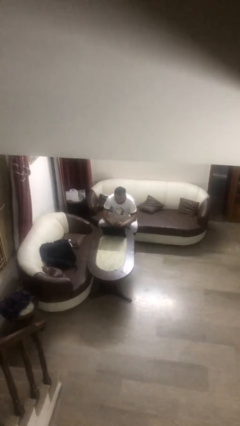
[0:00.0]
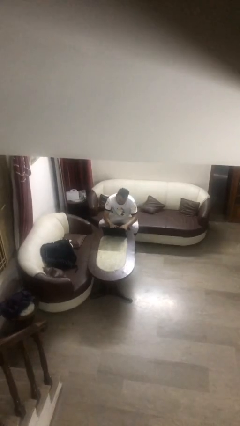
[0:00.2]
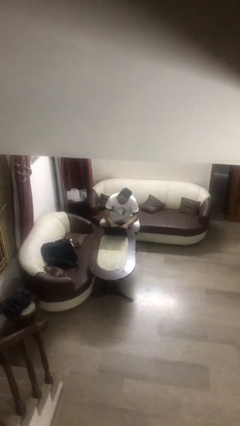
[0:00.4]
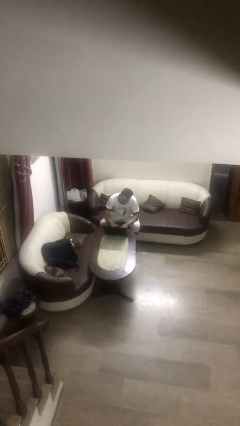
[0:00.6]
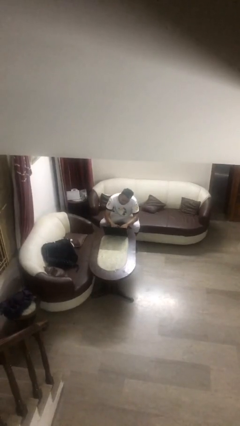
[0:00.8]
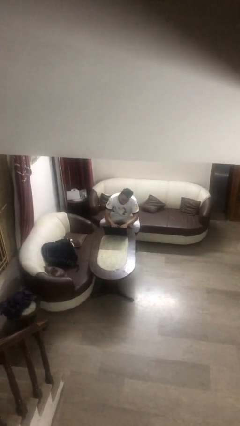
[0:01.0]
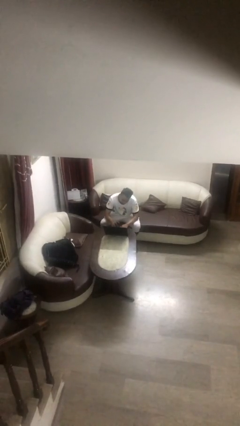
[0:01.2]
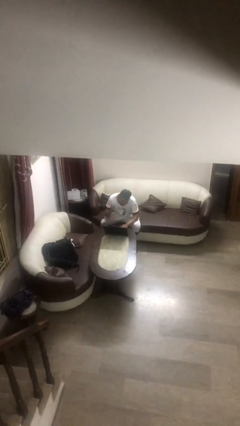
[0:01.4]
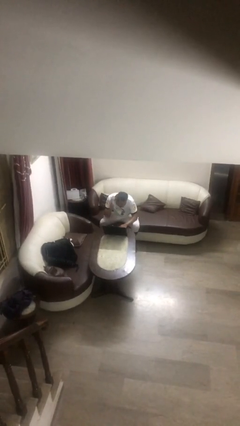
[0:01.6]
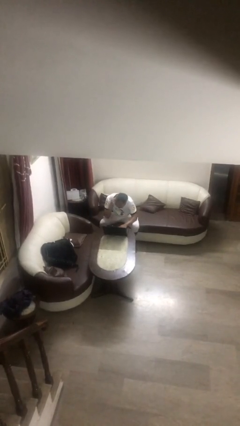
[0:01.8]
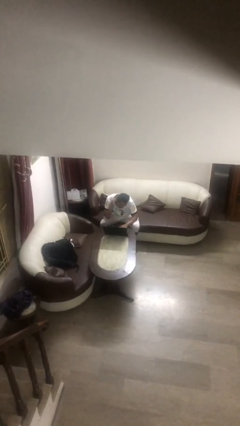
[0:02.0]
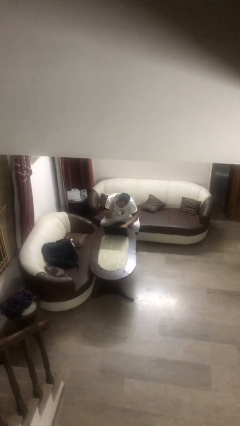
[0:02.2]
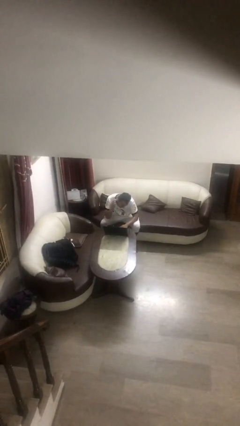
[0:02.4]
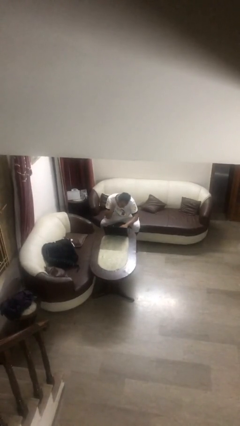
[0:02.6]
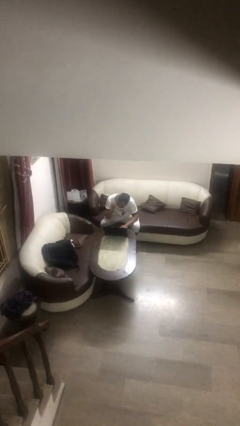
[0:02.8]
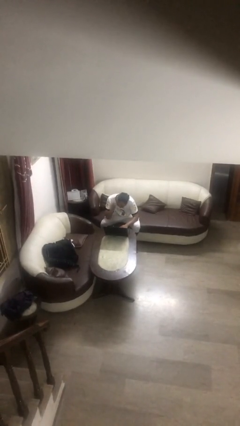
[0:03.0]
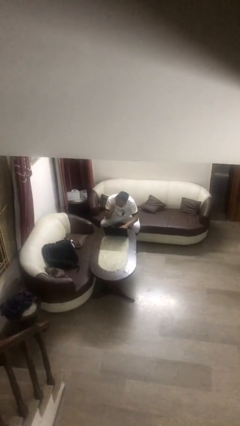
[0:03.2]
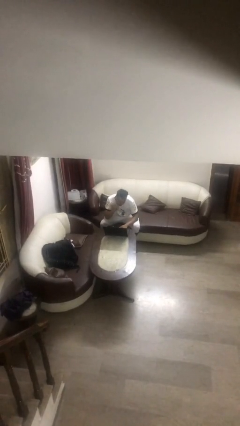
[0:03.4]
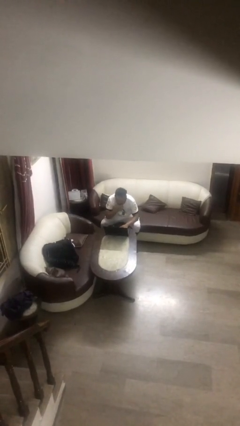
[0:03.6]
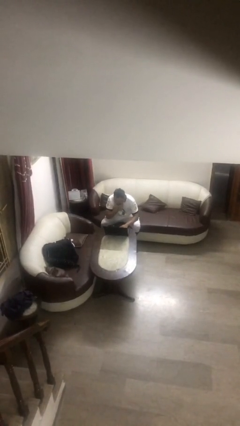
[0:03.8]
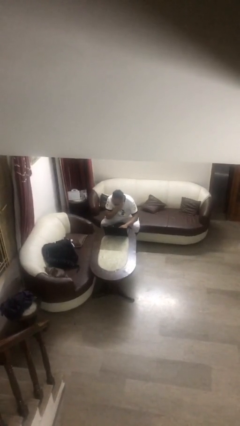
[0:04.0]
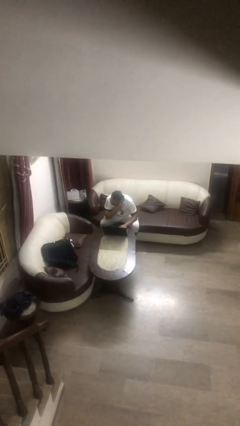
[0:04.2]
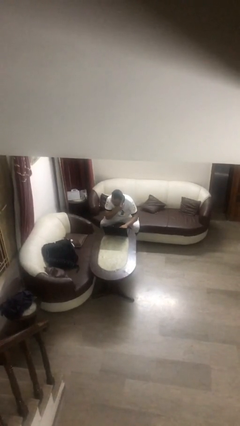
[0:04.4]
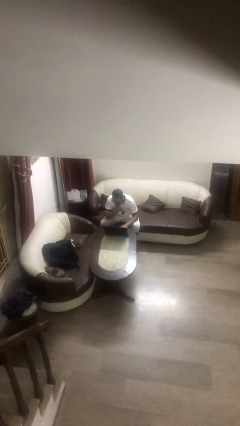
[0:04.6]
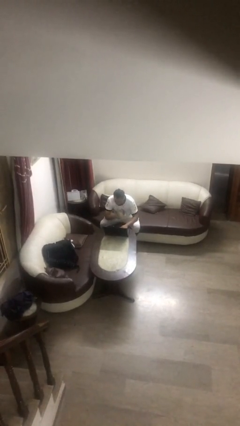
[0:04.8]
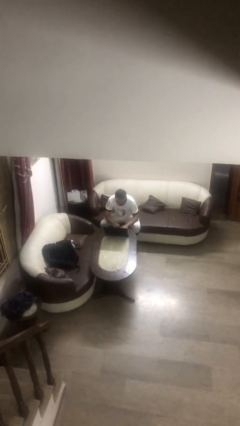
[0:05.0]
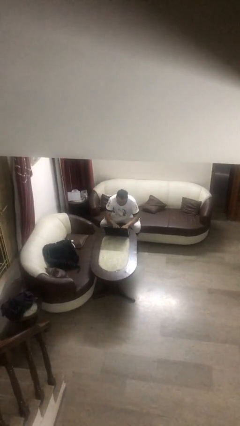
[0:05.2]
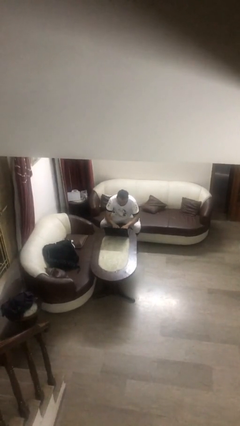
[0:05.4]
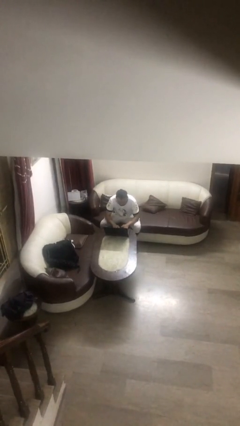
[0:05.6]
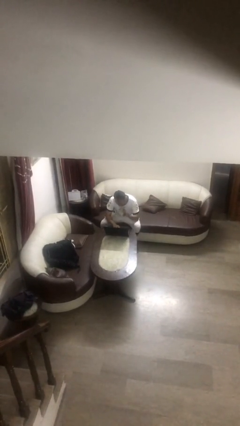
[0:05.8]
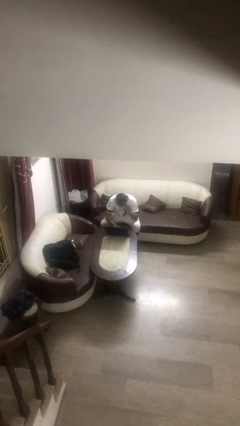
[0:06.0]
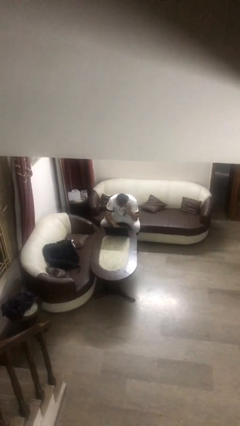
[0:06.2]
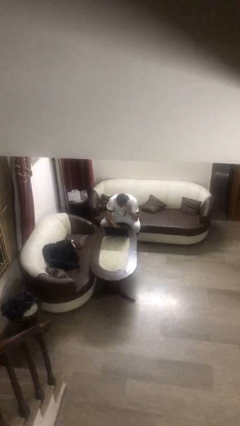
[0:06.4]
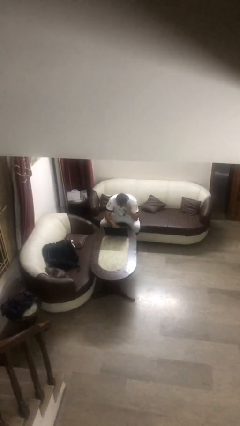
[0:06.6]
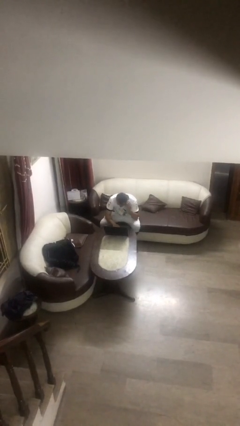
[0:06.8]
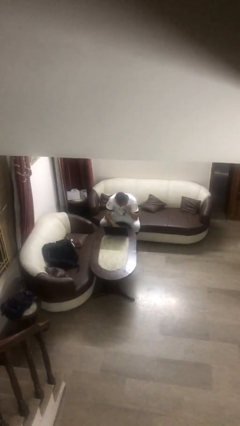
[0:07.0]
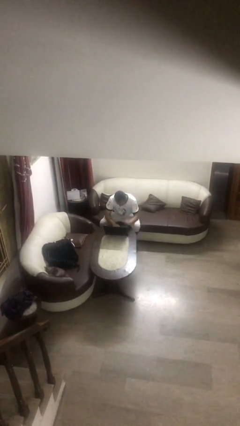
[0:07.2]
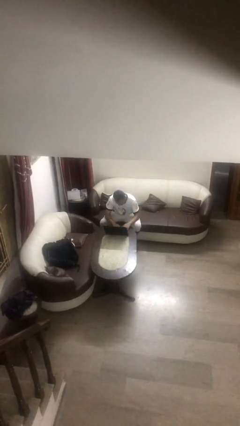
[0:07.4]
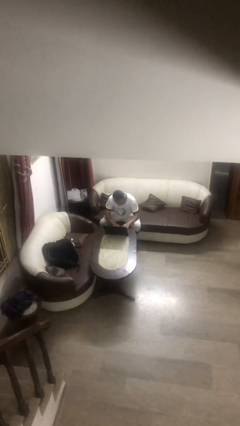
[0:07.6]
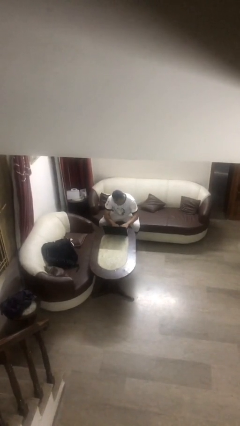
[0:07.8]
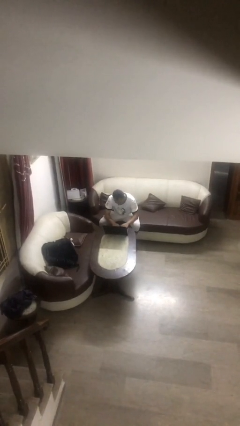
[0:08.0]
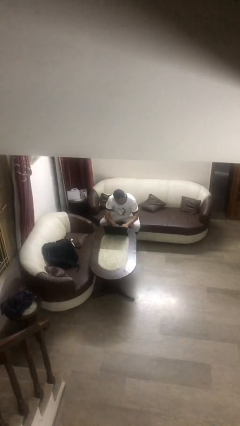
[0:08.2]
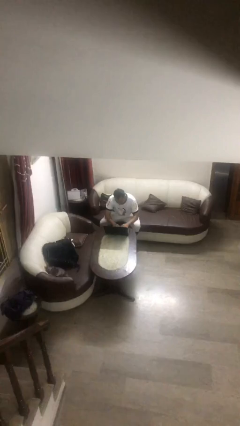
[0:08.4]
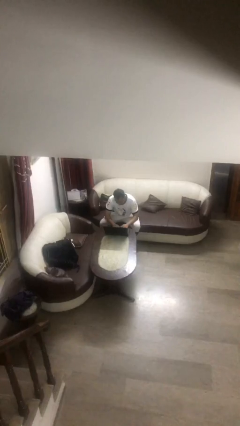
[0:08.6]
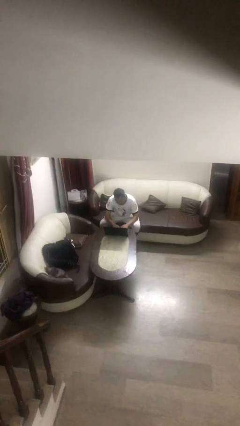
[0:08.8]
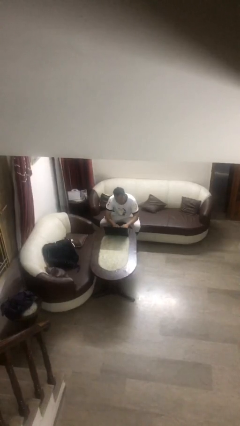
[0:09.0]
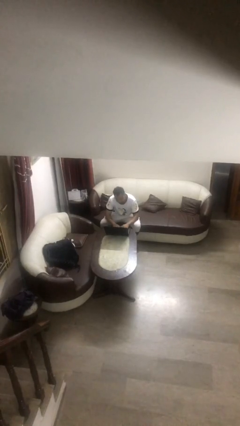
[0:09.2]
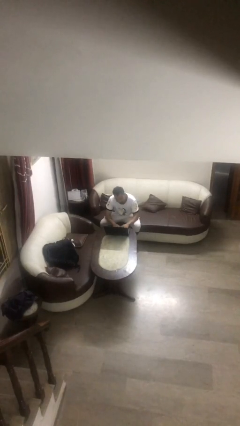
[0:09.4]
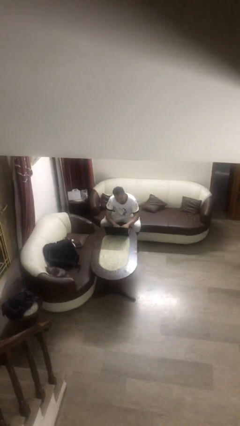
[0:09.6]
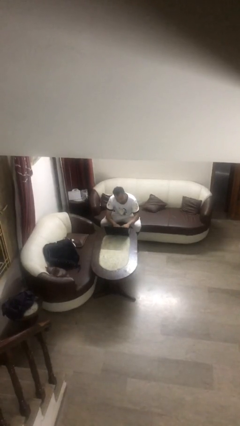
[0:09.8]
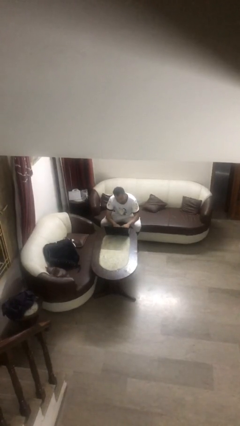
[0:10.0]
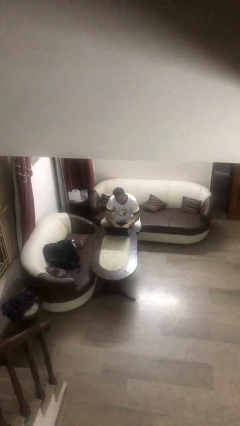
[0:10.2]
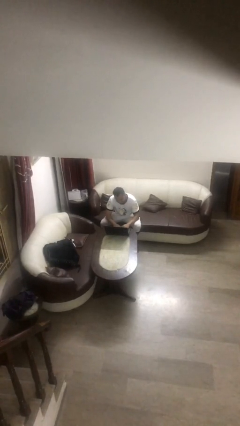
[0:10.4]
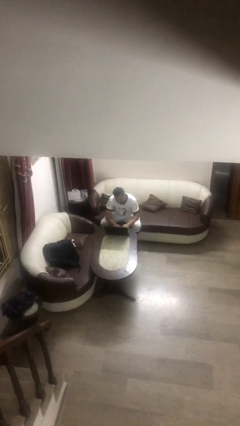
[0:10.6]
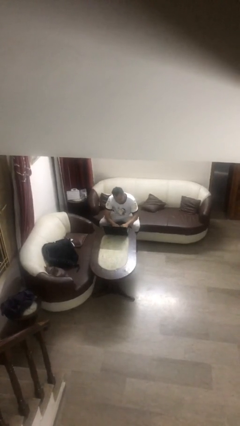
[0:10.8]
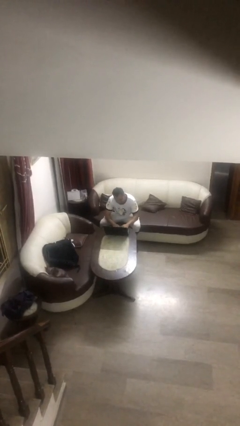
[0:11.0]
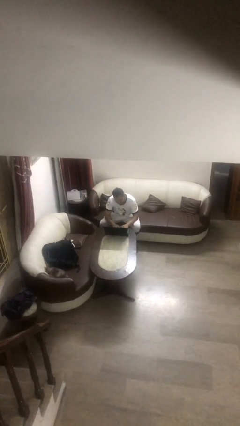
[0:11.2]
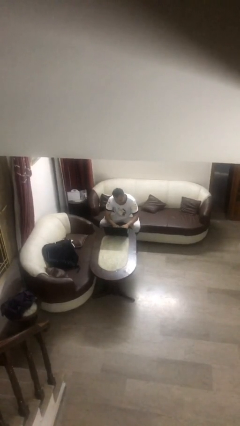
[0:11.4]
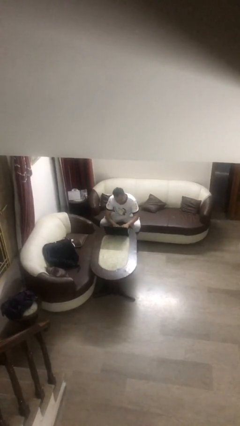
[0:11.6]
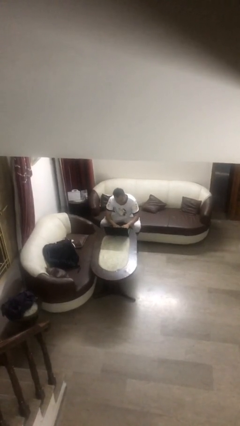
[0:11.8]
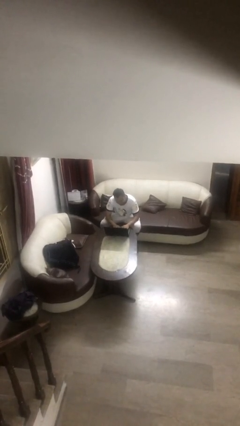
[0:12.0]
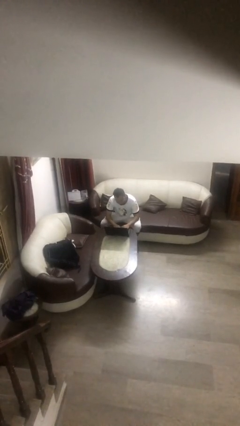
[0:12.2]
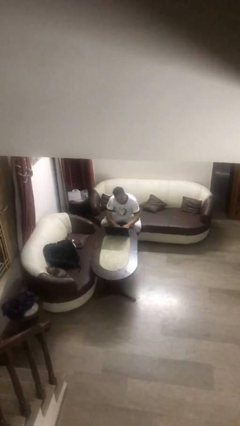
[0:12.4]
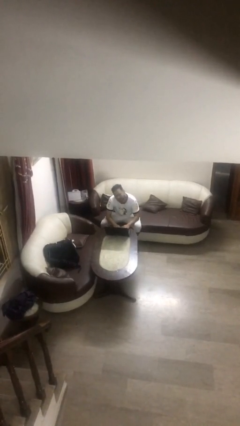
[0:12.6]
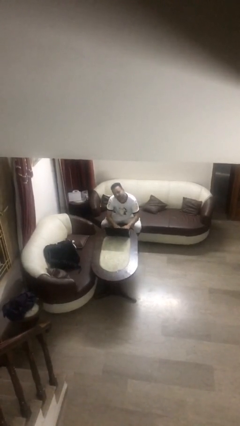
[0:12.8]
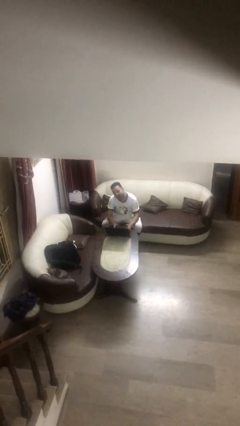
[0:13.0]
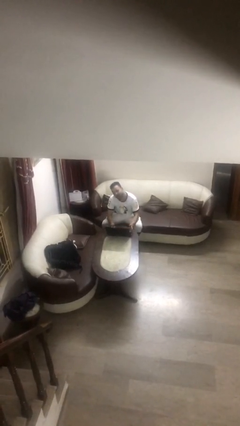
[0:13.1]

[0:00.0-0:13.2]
person interacts with laptop

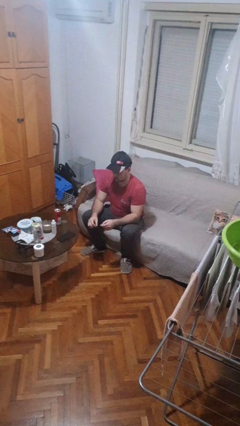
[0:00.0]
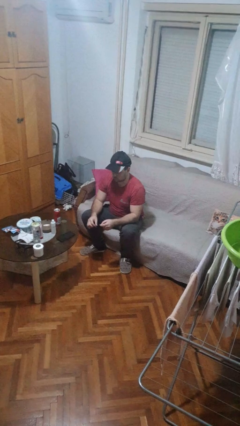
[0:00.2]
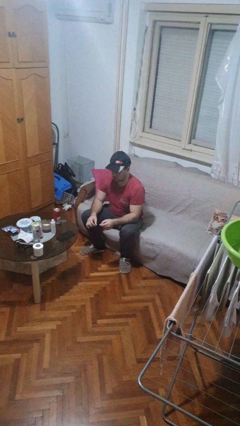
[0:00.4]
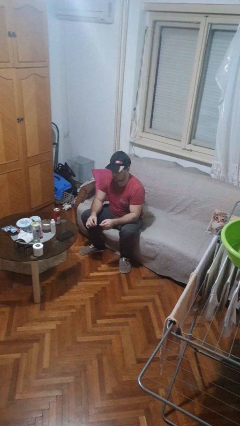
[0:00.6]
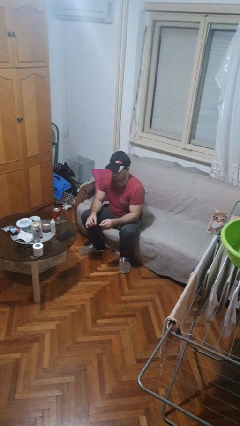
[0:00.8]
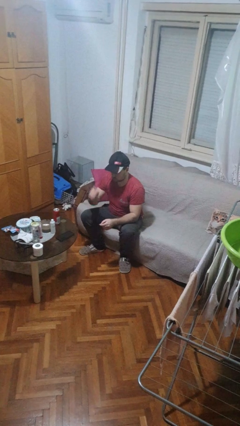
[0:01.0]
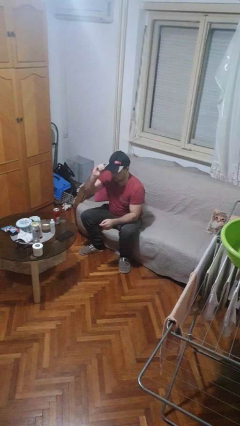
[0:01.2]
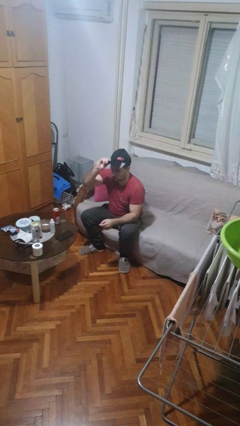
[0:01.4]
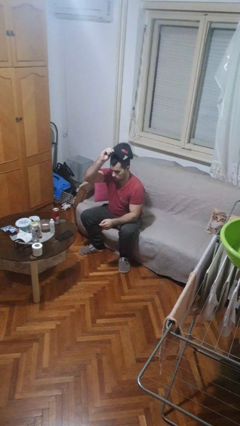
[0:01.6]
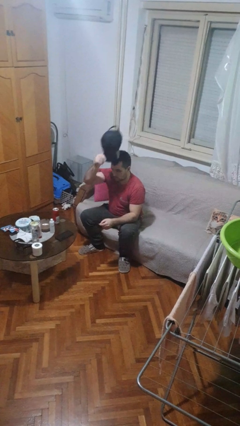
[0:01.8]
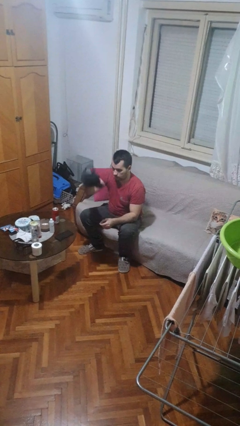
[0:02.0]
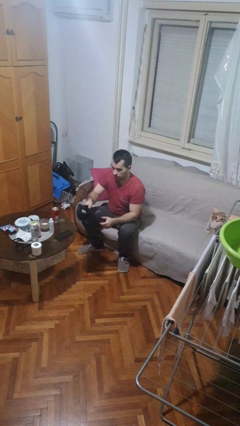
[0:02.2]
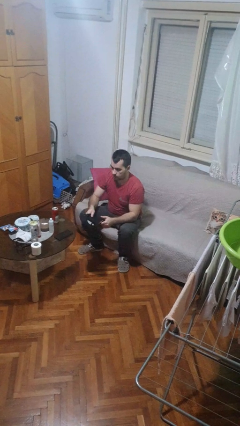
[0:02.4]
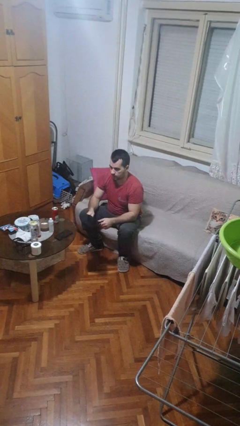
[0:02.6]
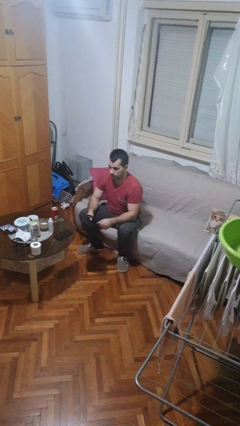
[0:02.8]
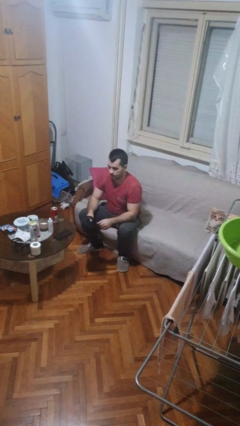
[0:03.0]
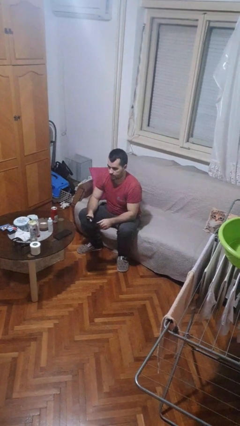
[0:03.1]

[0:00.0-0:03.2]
person takes off hat

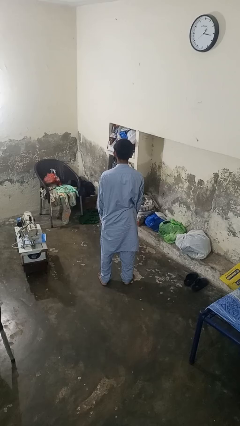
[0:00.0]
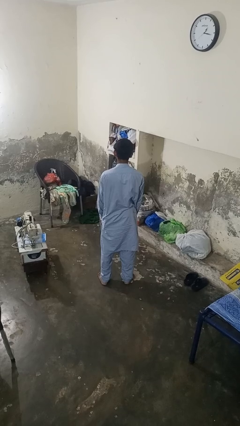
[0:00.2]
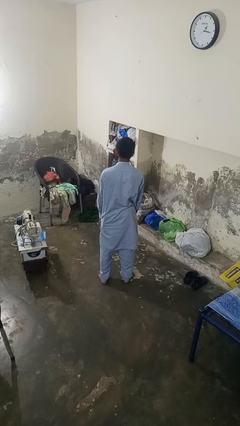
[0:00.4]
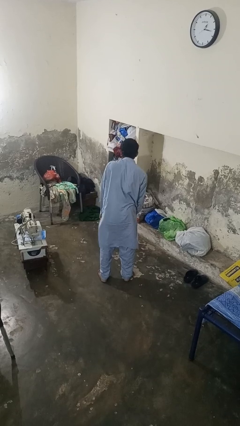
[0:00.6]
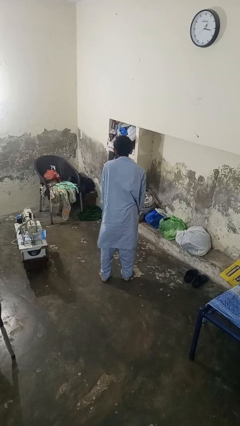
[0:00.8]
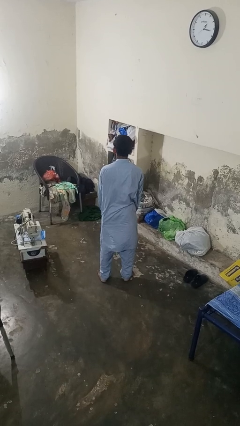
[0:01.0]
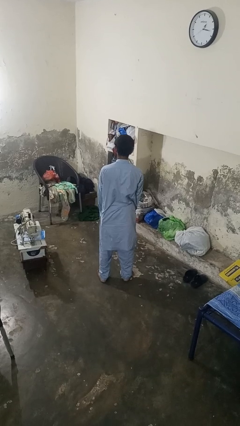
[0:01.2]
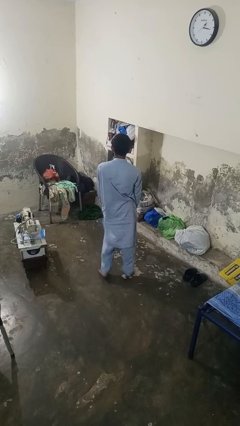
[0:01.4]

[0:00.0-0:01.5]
person dances in place
